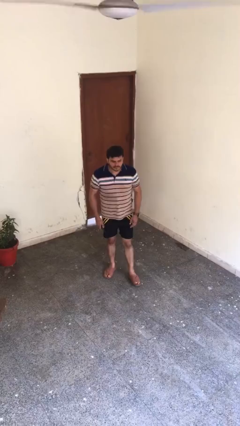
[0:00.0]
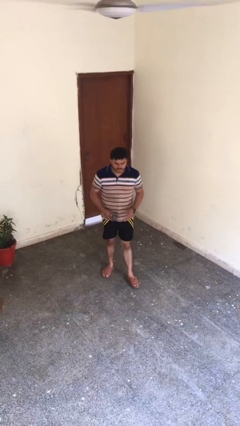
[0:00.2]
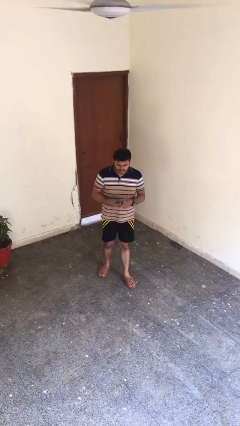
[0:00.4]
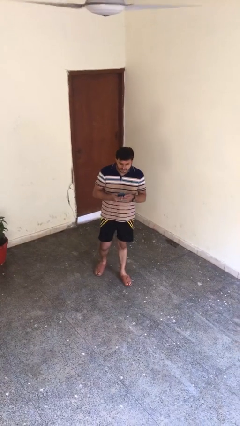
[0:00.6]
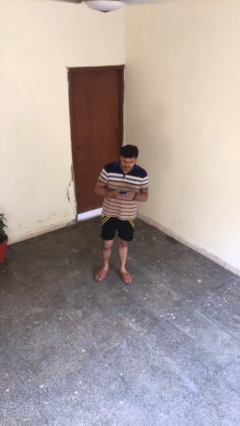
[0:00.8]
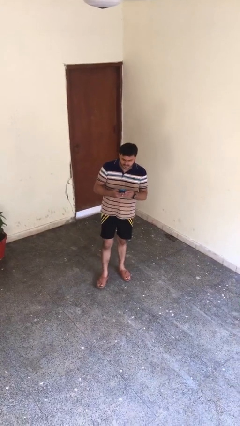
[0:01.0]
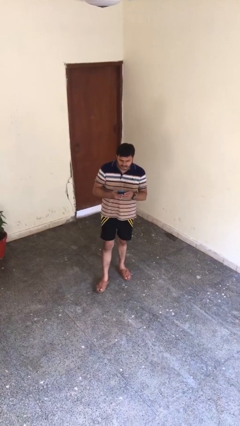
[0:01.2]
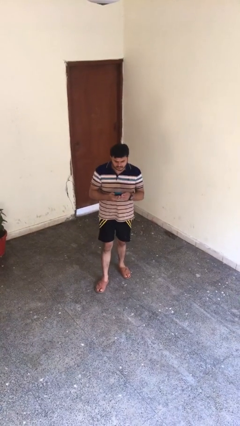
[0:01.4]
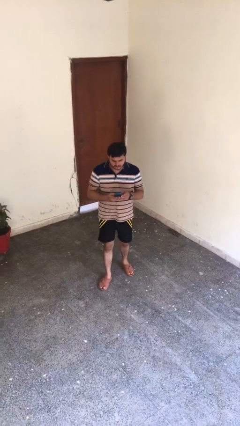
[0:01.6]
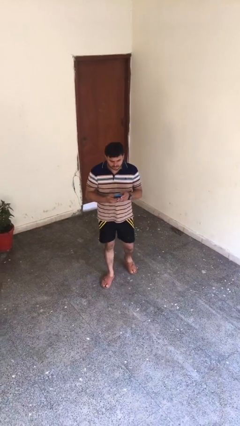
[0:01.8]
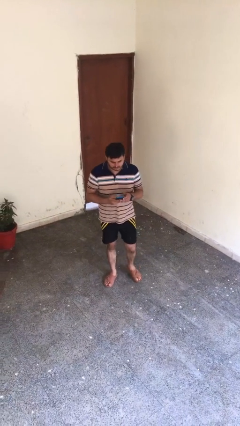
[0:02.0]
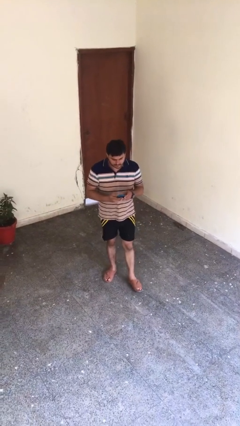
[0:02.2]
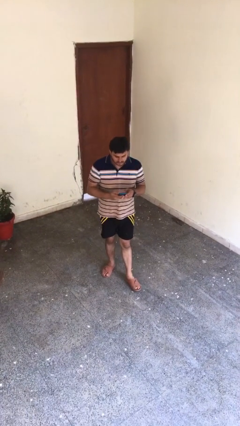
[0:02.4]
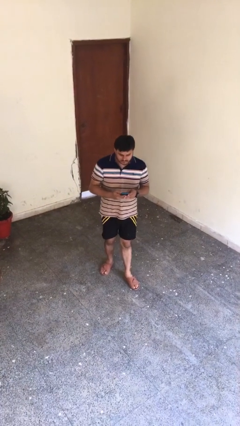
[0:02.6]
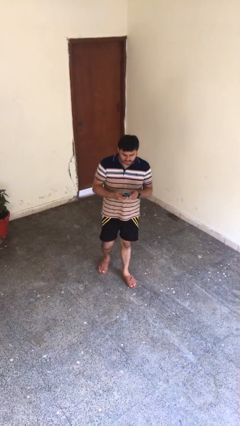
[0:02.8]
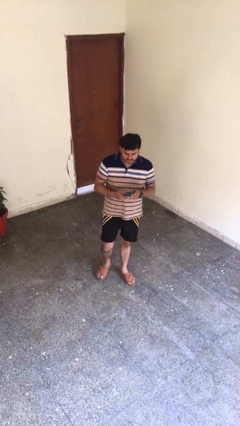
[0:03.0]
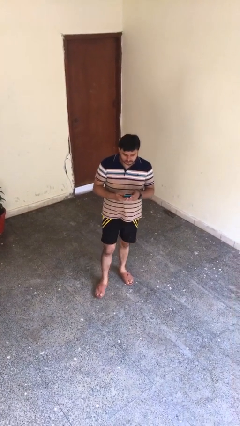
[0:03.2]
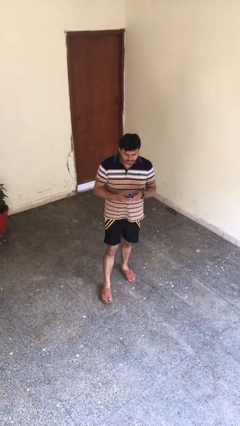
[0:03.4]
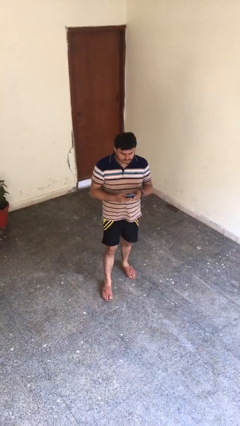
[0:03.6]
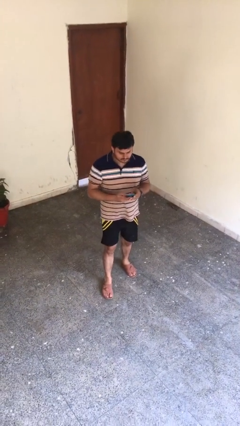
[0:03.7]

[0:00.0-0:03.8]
person texts on phone

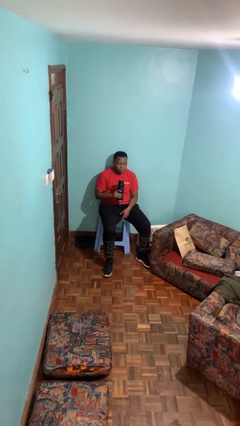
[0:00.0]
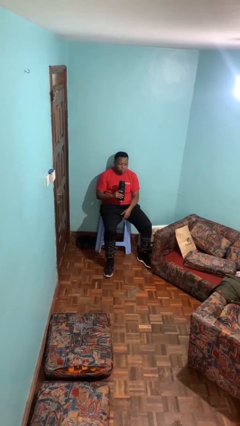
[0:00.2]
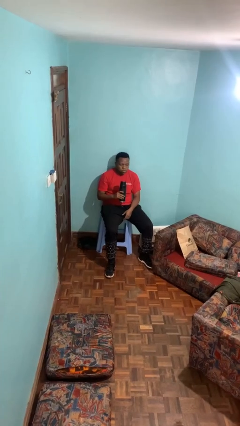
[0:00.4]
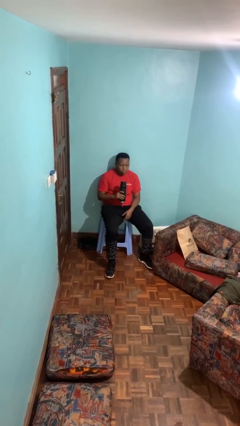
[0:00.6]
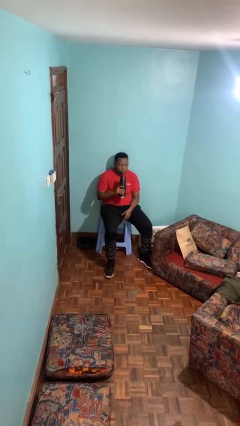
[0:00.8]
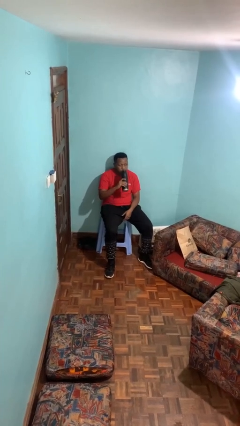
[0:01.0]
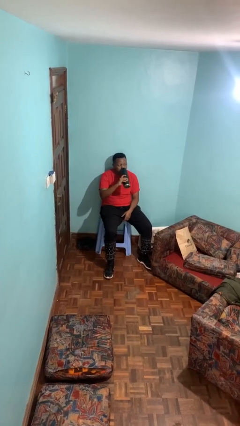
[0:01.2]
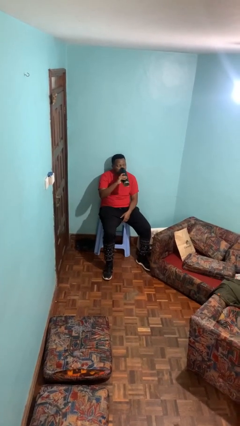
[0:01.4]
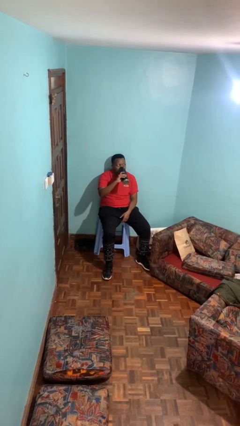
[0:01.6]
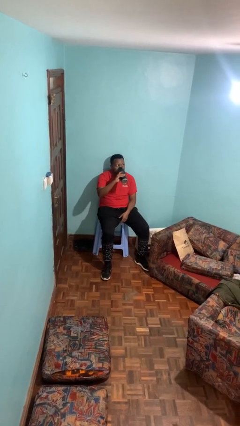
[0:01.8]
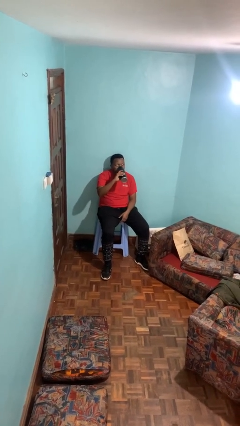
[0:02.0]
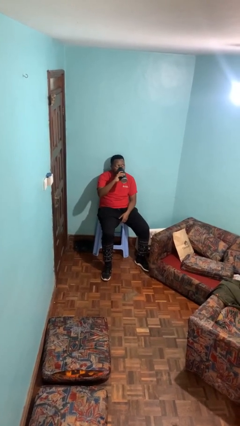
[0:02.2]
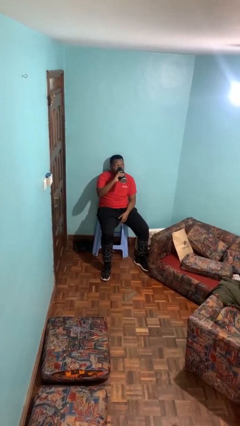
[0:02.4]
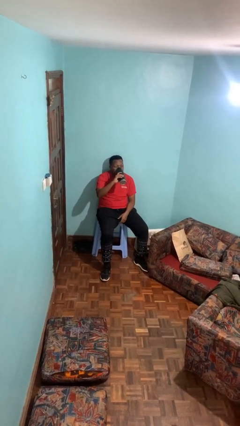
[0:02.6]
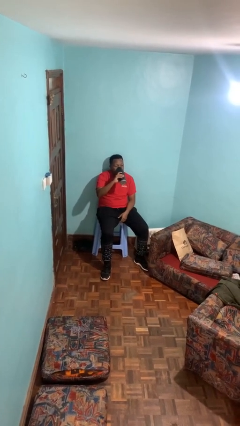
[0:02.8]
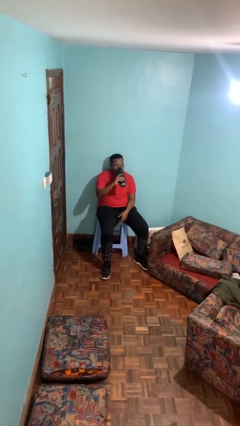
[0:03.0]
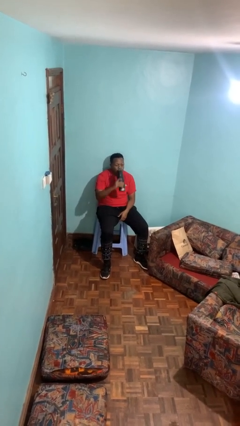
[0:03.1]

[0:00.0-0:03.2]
person drinks from bottle

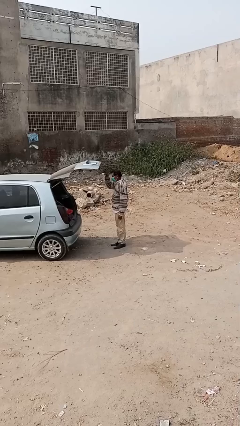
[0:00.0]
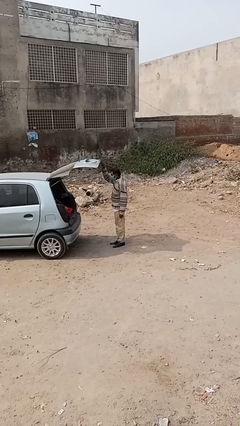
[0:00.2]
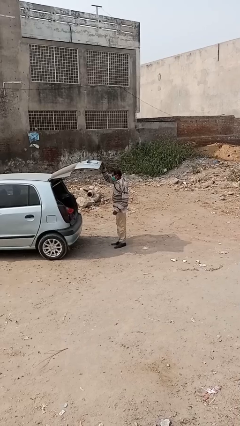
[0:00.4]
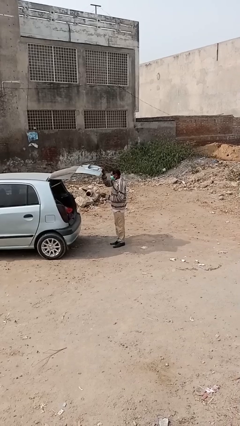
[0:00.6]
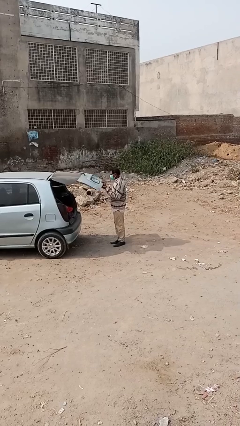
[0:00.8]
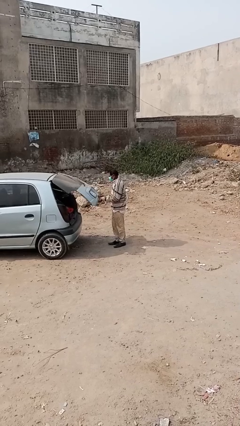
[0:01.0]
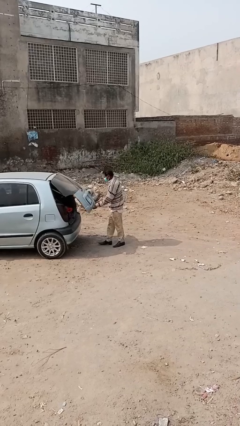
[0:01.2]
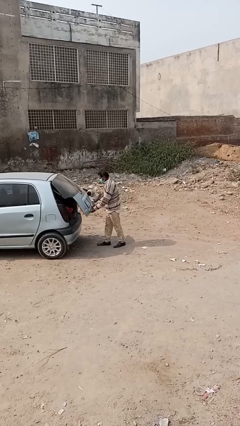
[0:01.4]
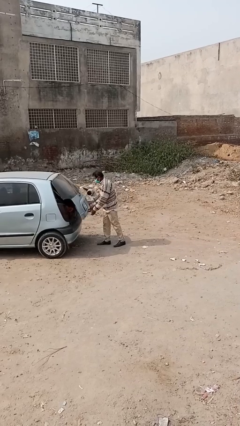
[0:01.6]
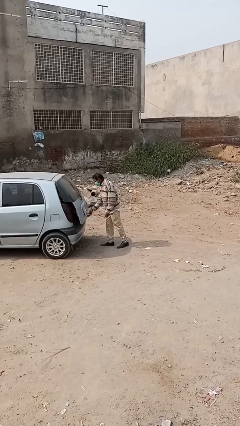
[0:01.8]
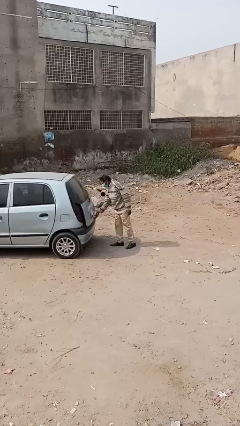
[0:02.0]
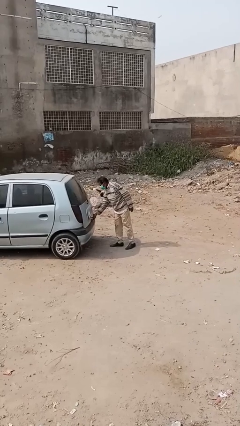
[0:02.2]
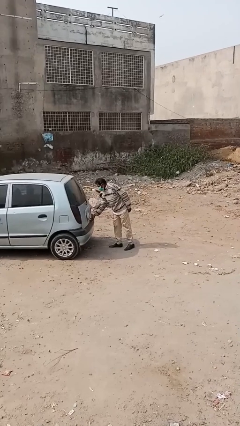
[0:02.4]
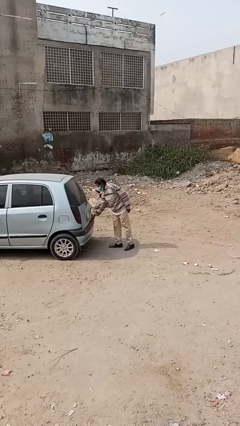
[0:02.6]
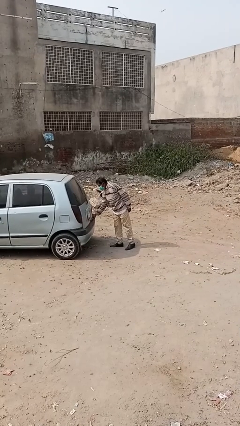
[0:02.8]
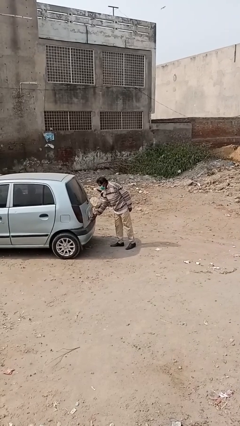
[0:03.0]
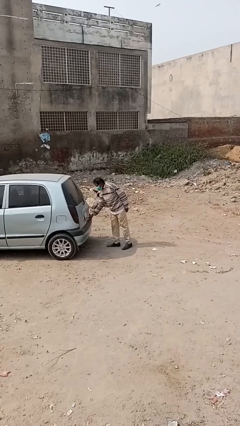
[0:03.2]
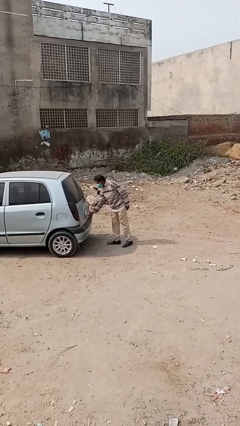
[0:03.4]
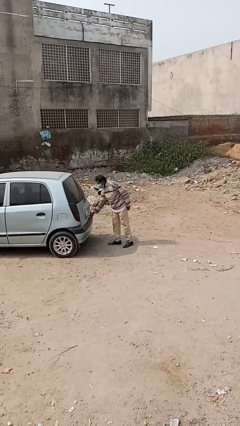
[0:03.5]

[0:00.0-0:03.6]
person closes car trunk

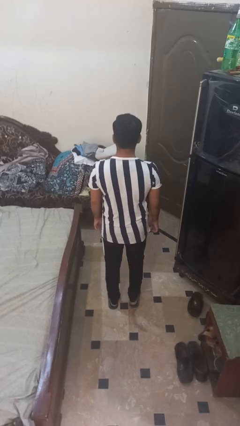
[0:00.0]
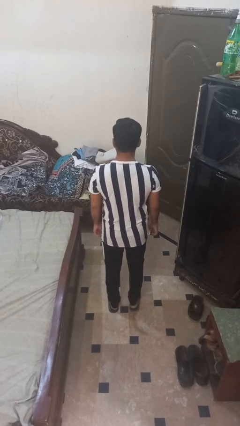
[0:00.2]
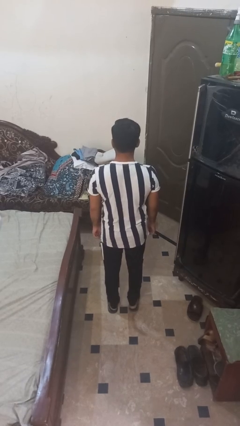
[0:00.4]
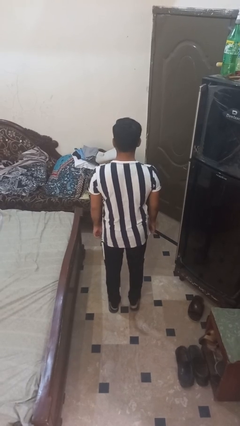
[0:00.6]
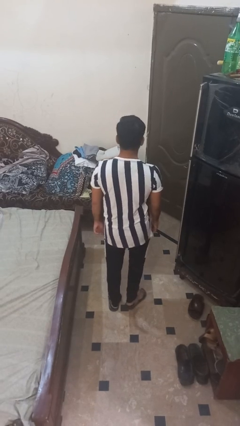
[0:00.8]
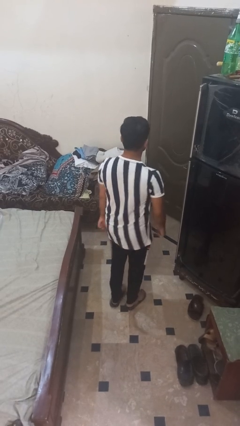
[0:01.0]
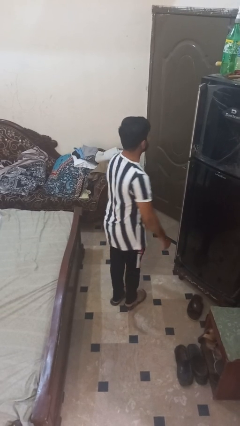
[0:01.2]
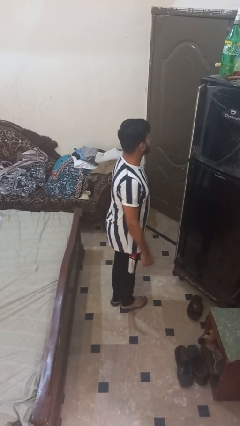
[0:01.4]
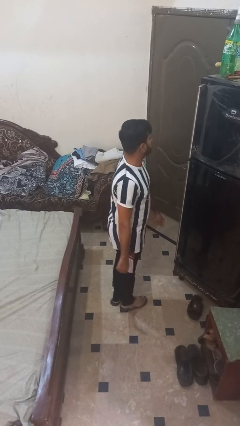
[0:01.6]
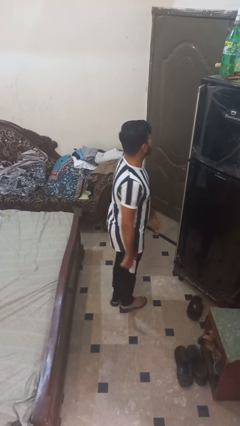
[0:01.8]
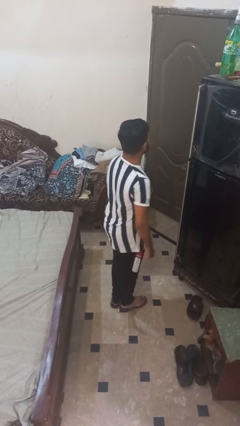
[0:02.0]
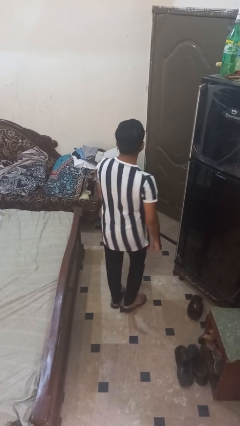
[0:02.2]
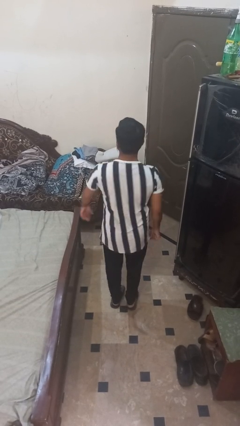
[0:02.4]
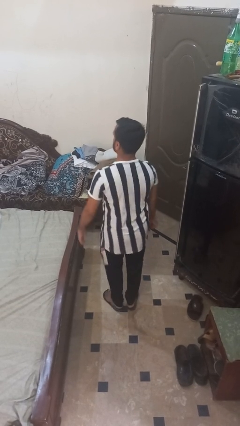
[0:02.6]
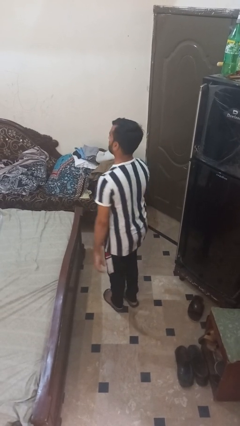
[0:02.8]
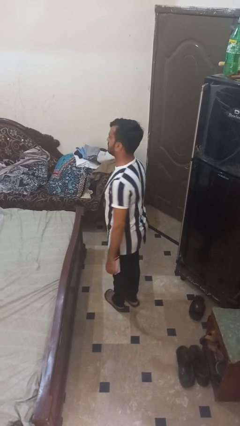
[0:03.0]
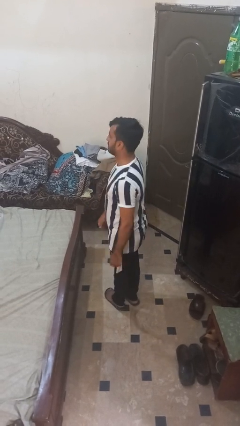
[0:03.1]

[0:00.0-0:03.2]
person twirls

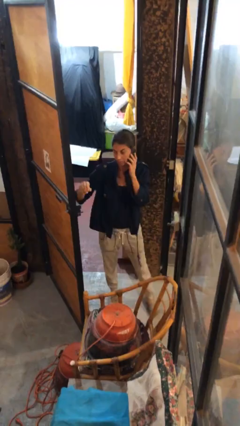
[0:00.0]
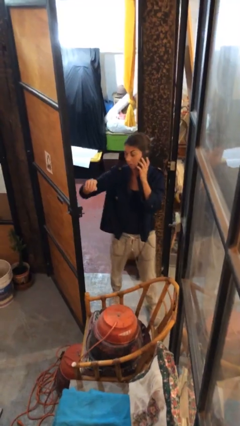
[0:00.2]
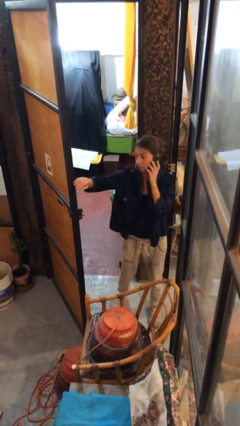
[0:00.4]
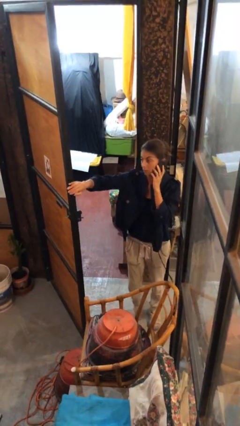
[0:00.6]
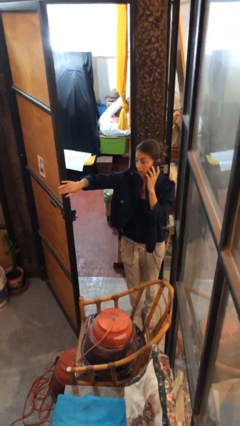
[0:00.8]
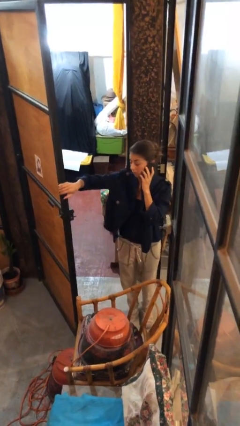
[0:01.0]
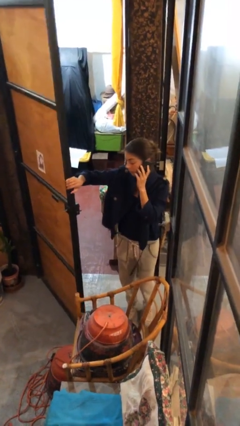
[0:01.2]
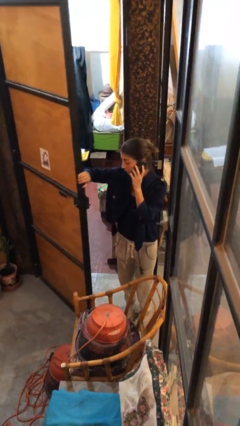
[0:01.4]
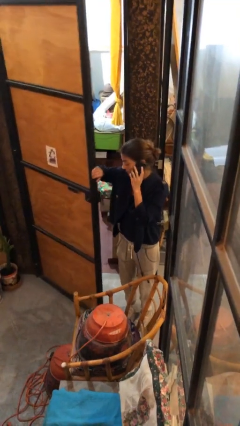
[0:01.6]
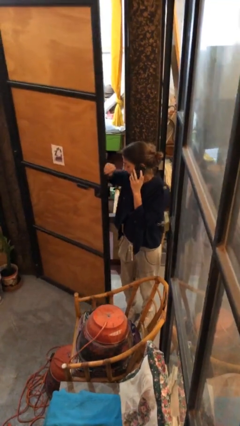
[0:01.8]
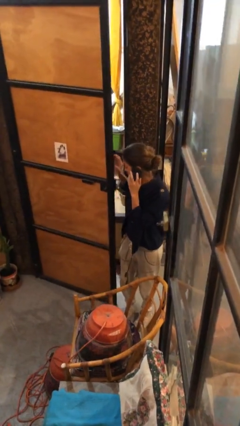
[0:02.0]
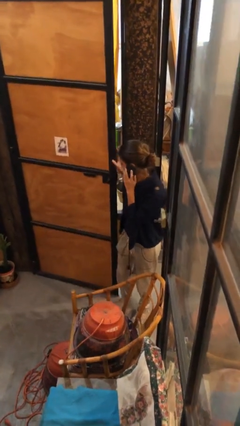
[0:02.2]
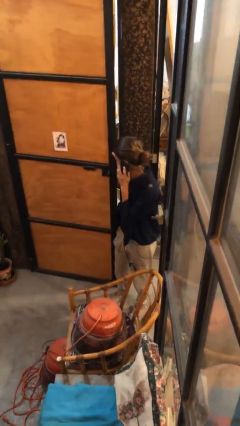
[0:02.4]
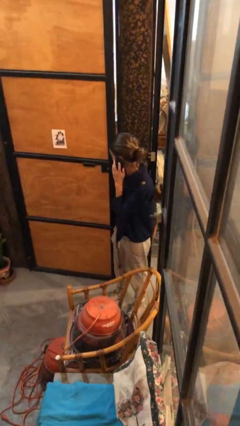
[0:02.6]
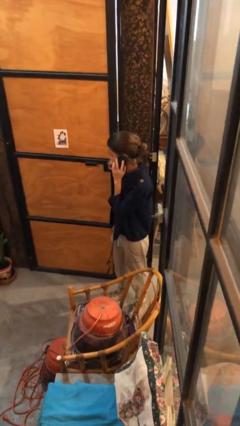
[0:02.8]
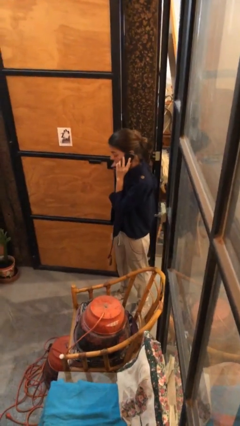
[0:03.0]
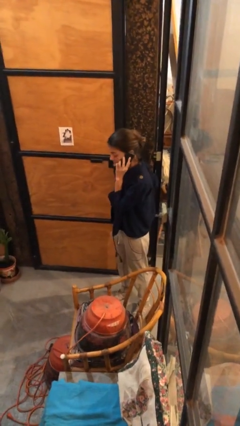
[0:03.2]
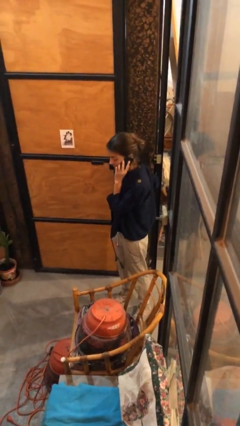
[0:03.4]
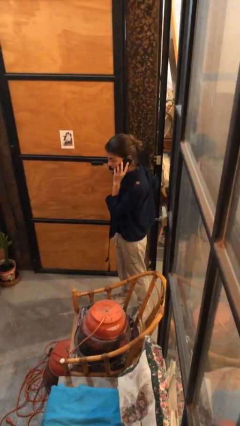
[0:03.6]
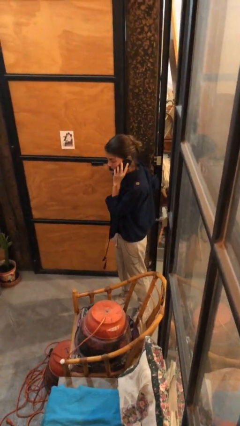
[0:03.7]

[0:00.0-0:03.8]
person closes facility door
